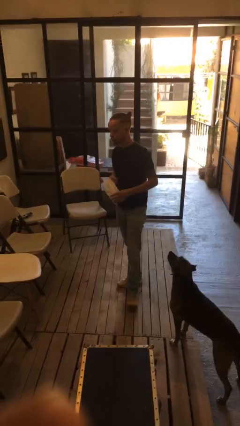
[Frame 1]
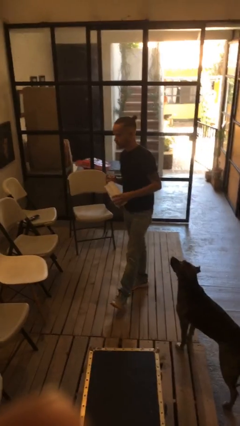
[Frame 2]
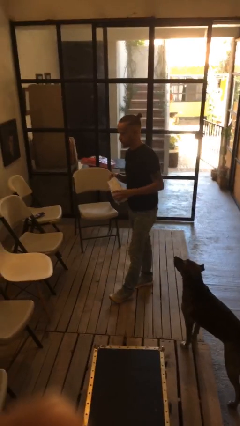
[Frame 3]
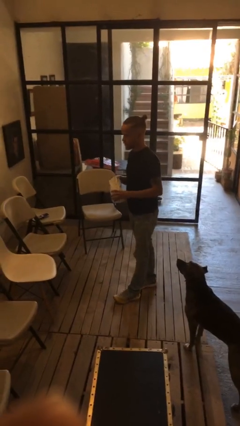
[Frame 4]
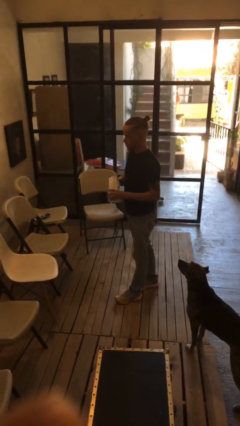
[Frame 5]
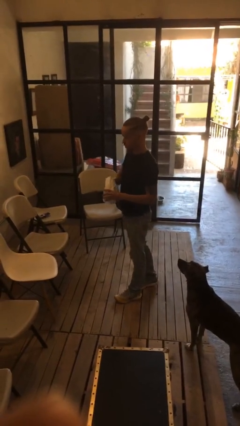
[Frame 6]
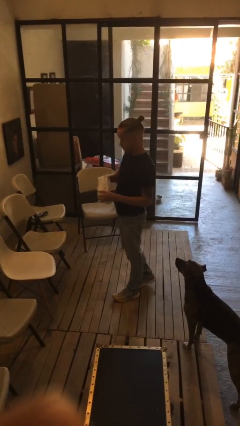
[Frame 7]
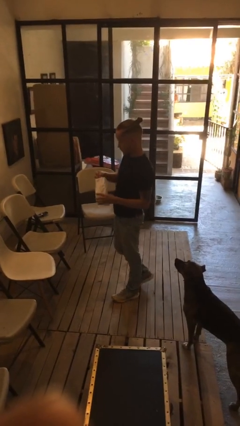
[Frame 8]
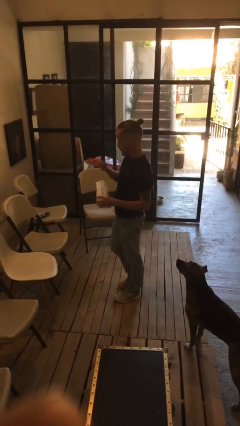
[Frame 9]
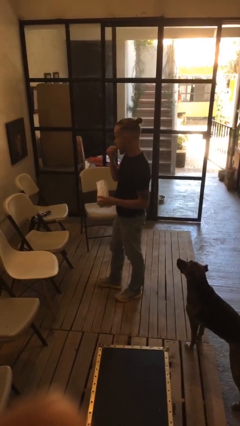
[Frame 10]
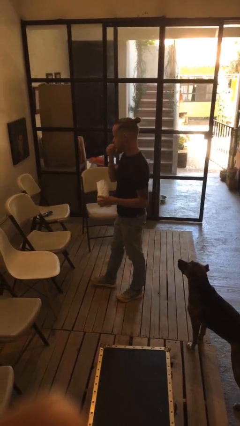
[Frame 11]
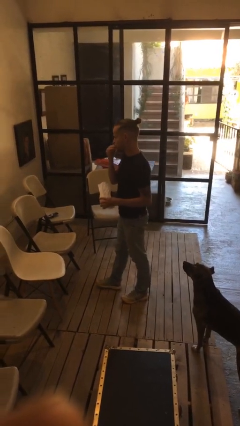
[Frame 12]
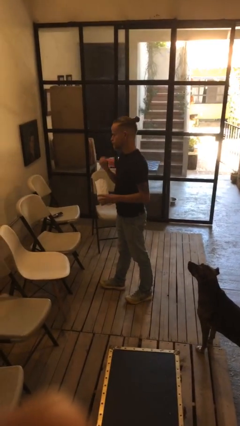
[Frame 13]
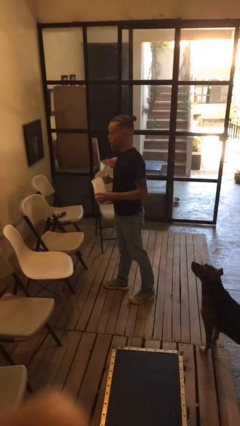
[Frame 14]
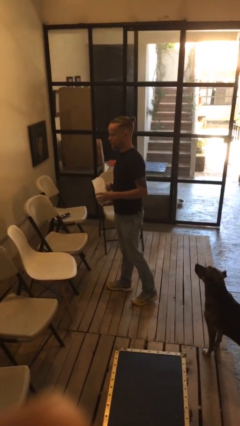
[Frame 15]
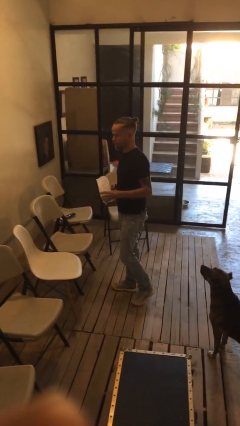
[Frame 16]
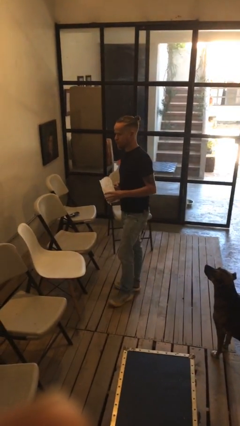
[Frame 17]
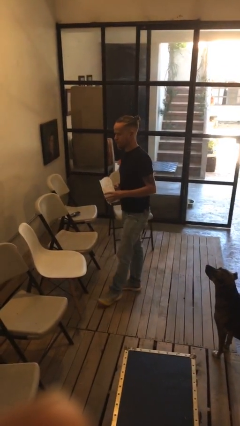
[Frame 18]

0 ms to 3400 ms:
person eats snack from bag

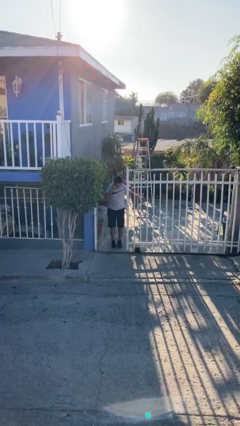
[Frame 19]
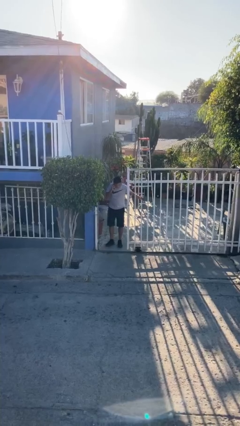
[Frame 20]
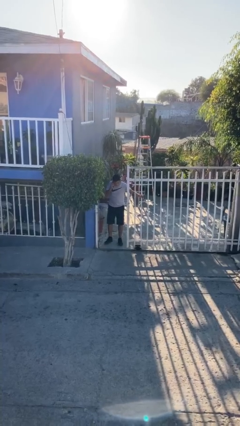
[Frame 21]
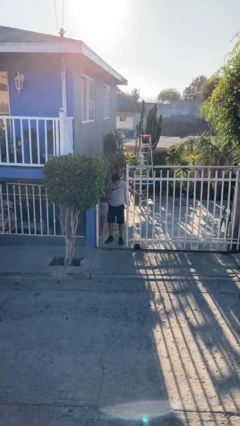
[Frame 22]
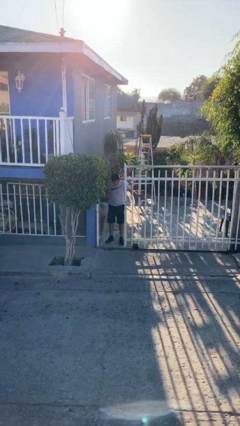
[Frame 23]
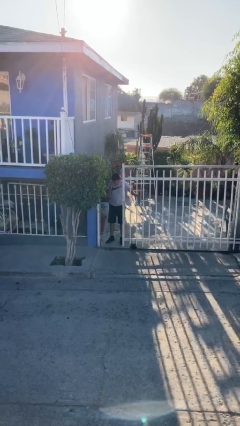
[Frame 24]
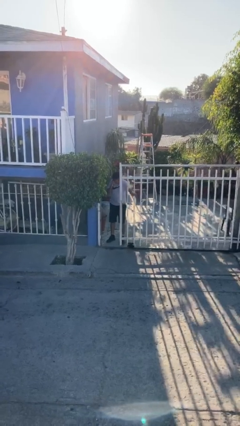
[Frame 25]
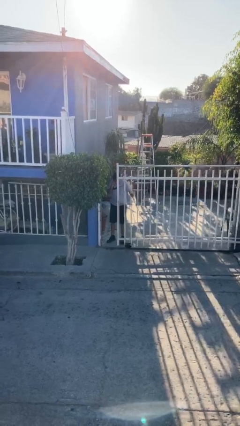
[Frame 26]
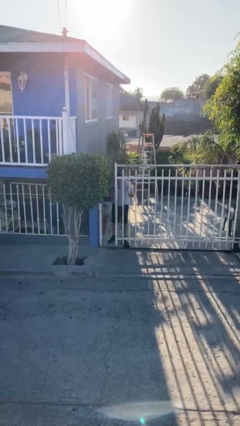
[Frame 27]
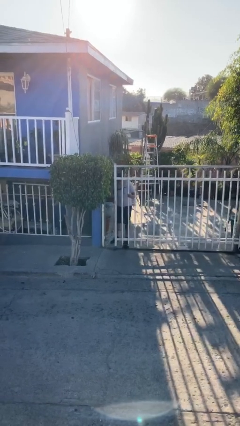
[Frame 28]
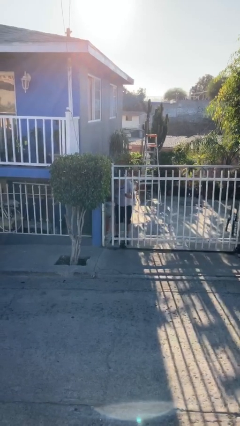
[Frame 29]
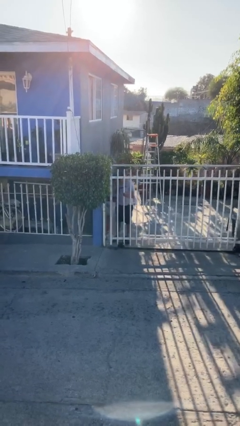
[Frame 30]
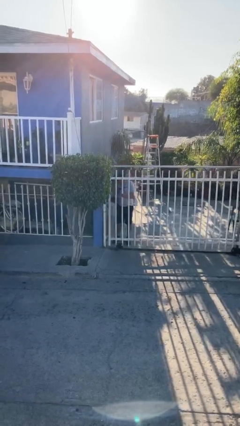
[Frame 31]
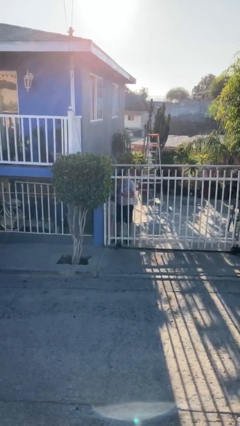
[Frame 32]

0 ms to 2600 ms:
person closes facility door

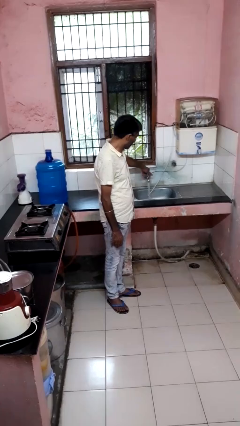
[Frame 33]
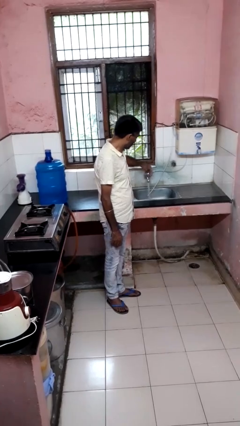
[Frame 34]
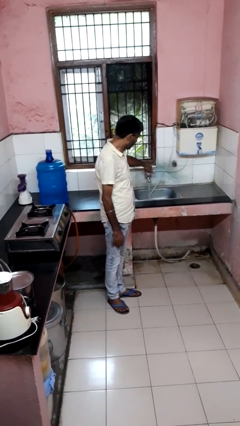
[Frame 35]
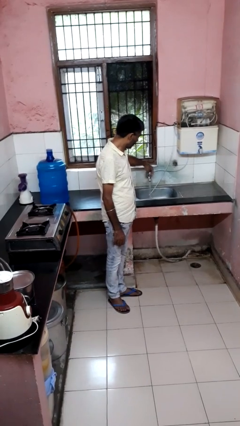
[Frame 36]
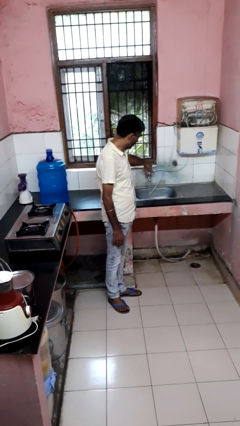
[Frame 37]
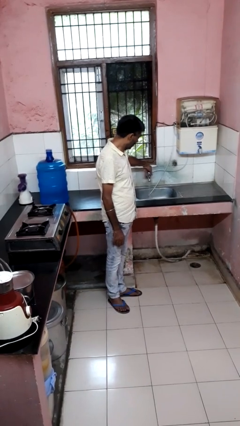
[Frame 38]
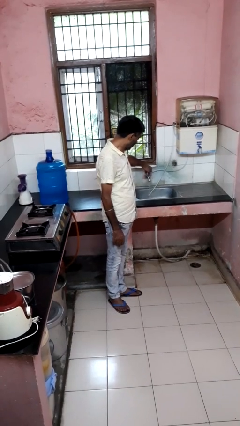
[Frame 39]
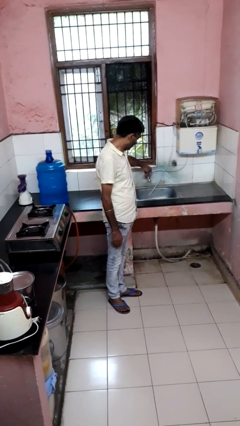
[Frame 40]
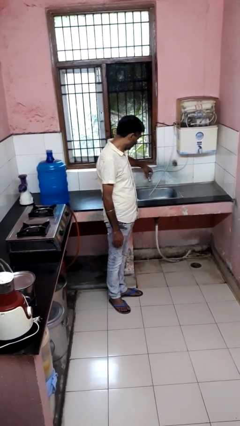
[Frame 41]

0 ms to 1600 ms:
person turns off faucet

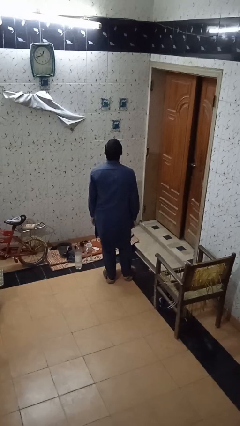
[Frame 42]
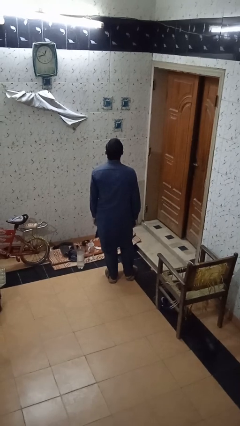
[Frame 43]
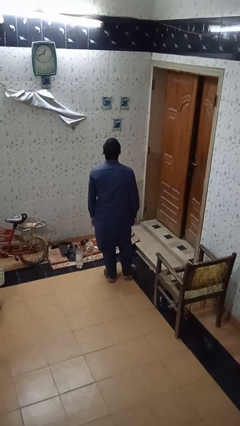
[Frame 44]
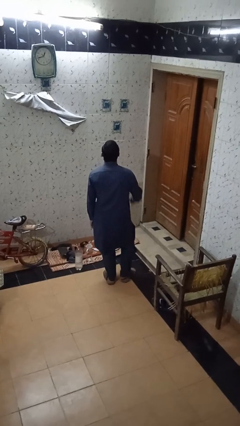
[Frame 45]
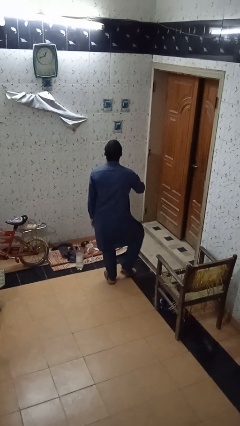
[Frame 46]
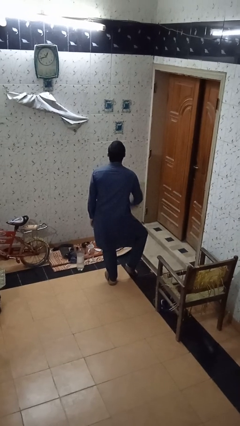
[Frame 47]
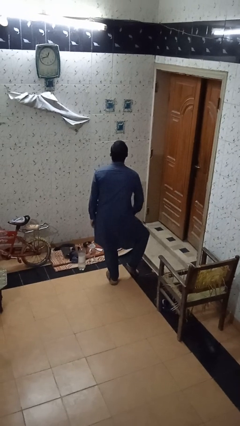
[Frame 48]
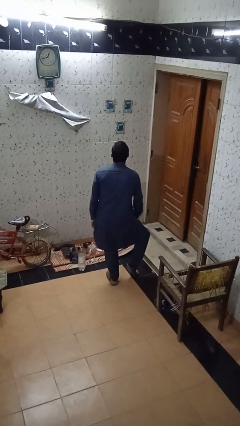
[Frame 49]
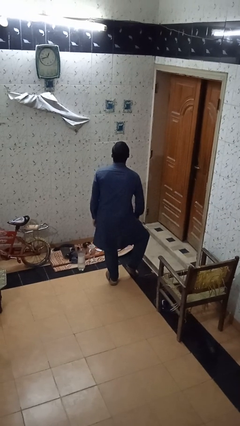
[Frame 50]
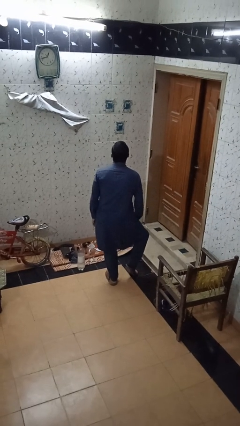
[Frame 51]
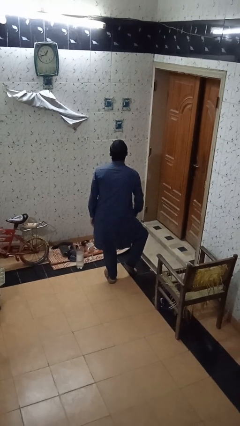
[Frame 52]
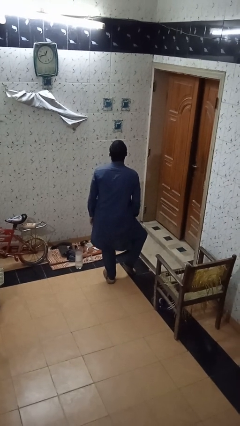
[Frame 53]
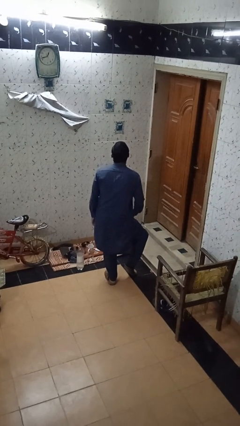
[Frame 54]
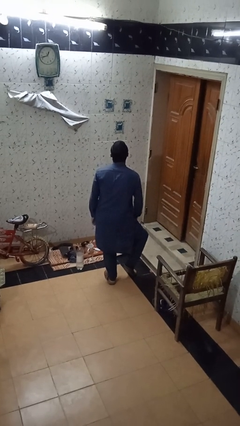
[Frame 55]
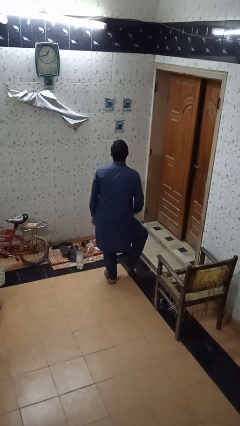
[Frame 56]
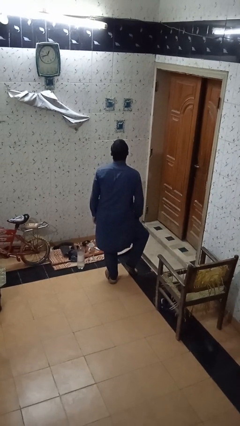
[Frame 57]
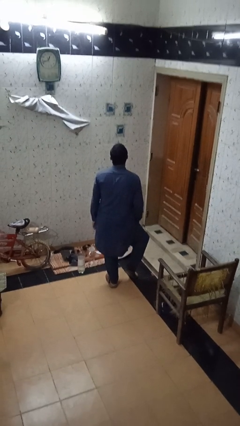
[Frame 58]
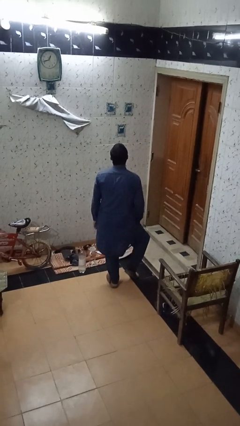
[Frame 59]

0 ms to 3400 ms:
person slaps hands on thighs

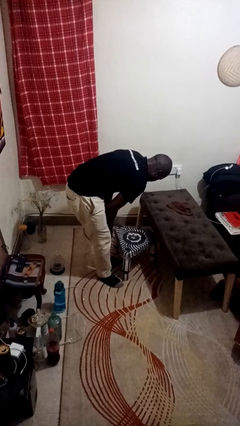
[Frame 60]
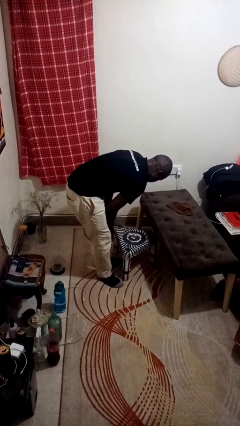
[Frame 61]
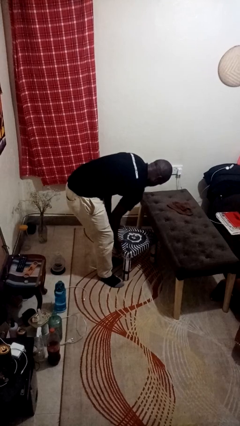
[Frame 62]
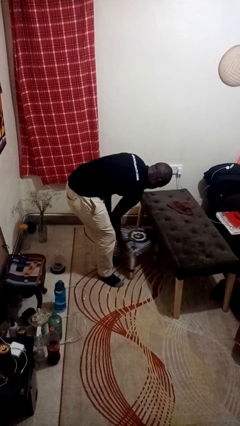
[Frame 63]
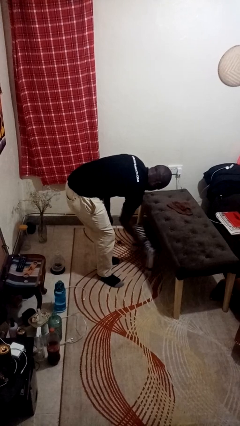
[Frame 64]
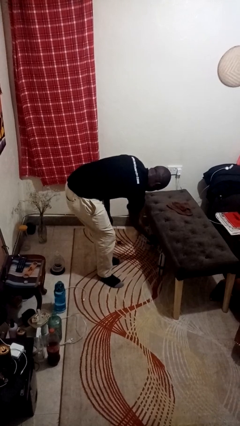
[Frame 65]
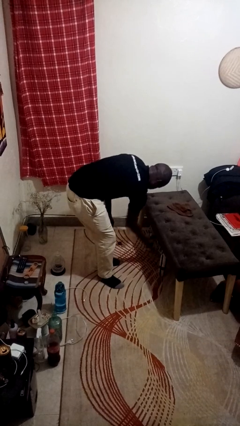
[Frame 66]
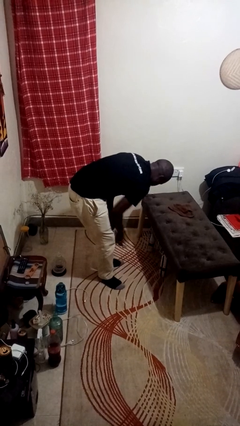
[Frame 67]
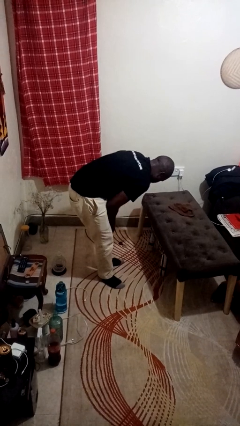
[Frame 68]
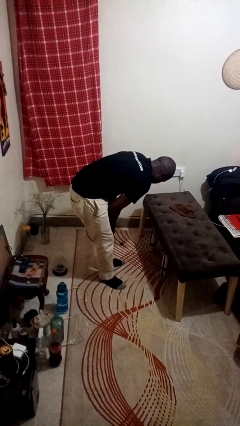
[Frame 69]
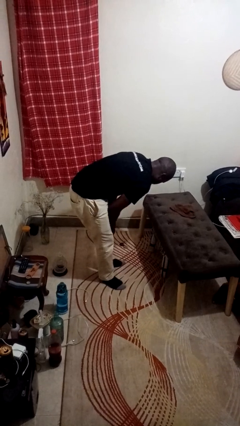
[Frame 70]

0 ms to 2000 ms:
person pushes in chair

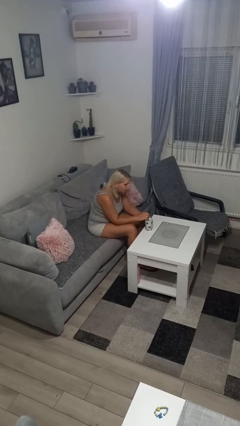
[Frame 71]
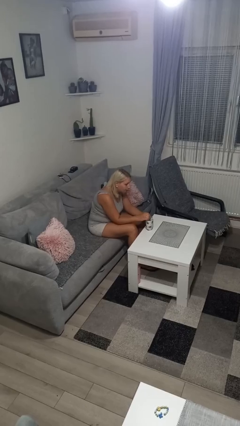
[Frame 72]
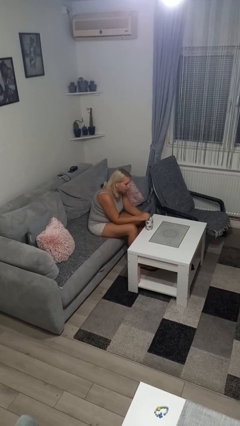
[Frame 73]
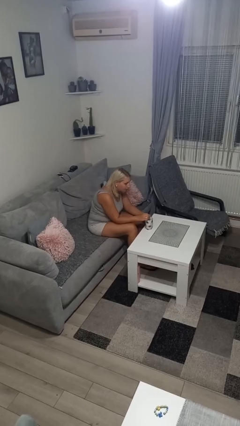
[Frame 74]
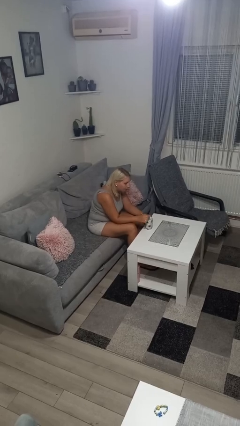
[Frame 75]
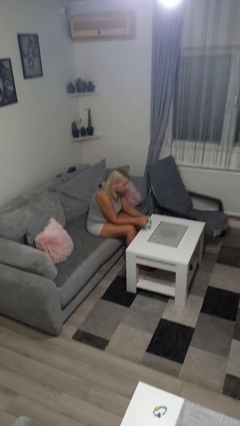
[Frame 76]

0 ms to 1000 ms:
person stirs mug

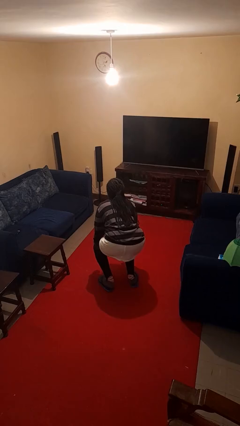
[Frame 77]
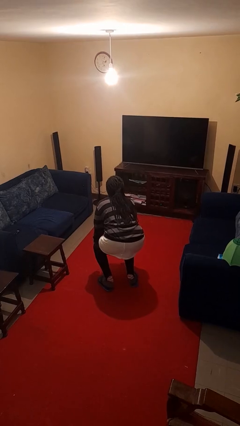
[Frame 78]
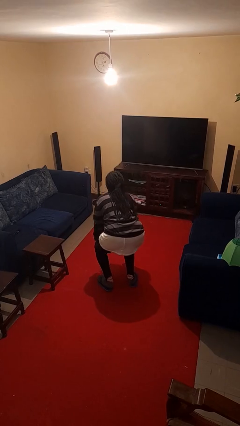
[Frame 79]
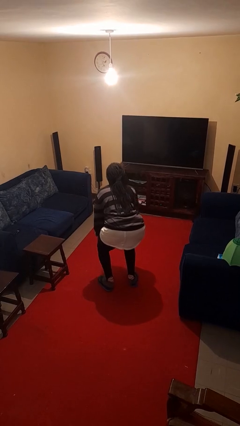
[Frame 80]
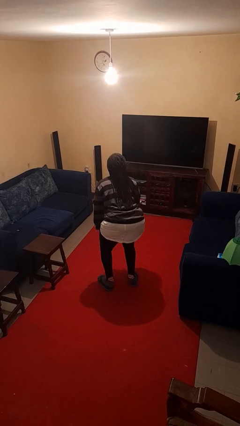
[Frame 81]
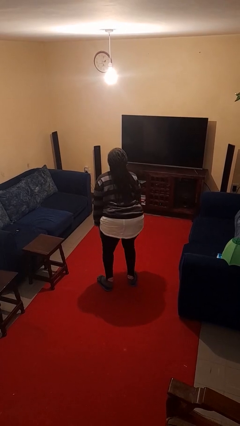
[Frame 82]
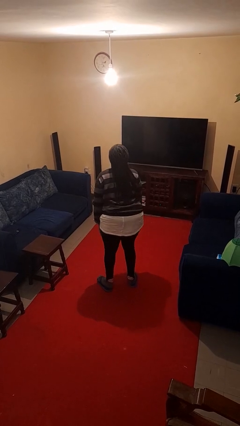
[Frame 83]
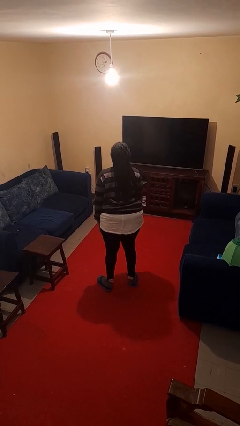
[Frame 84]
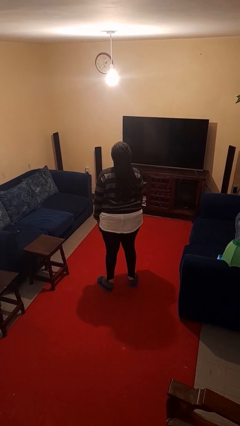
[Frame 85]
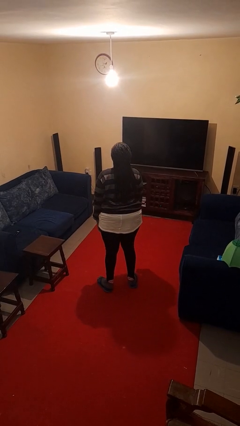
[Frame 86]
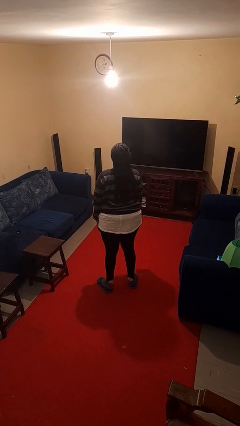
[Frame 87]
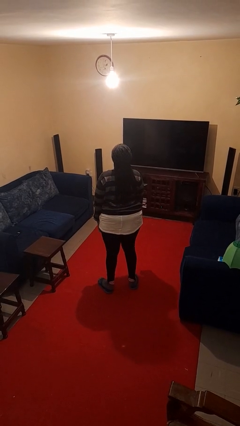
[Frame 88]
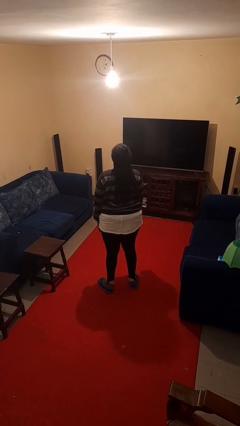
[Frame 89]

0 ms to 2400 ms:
person stands up

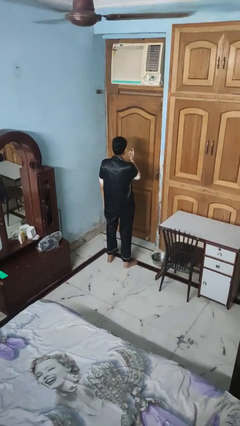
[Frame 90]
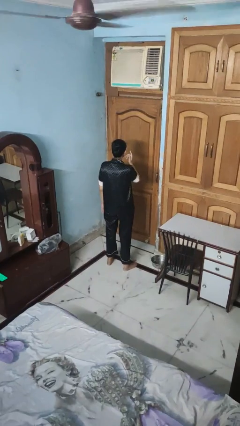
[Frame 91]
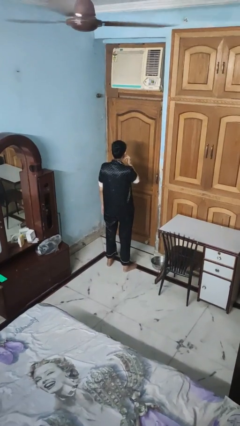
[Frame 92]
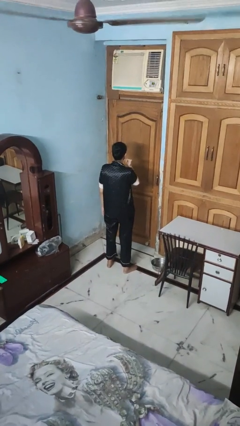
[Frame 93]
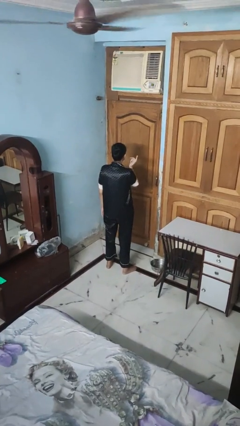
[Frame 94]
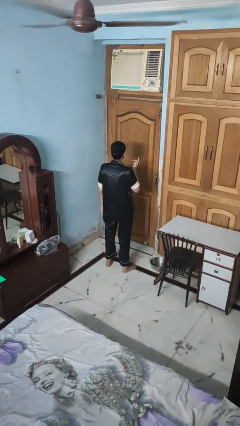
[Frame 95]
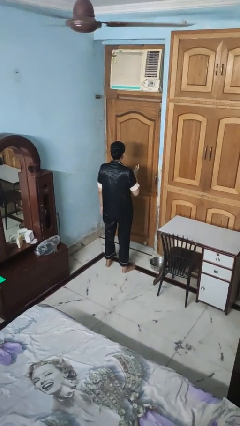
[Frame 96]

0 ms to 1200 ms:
person touches earlobe
